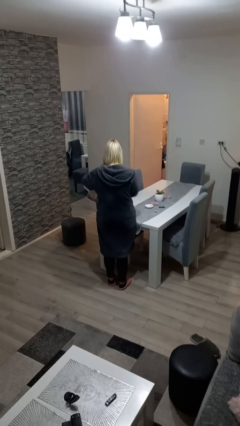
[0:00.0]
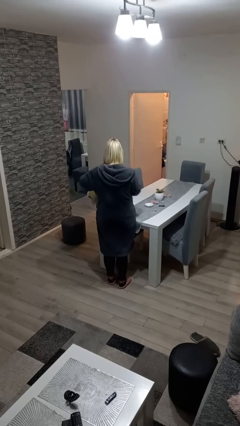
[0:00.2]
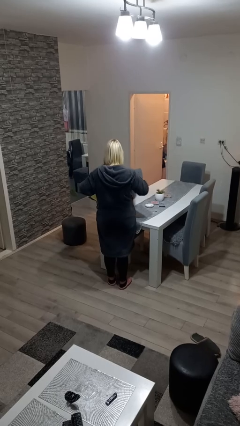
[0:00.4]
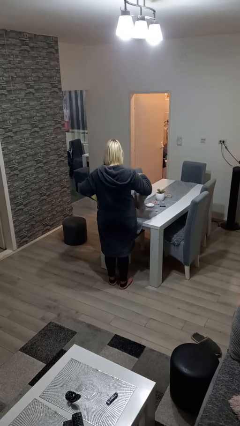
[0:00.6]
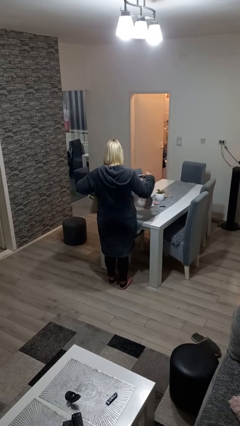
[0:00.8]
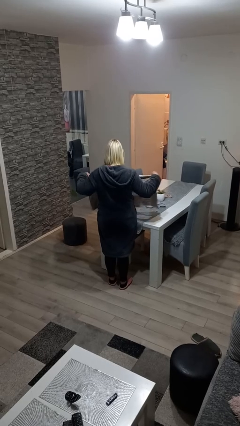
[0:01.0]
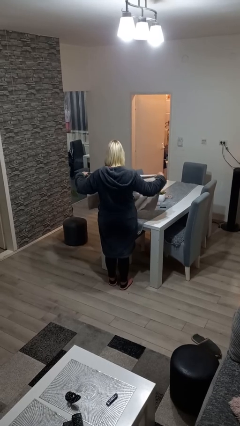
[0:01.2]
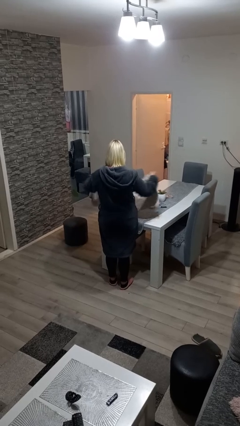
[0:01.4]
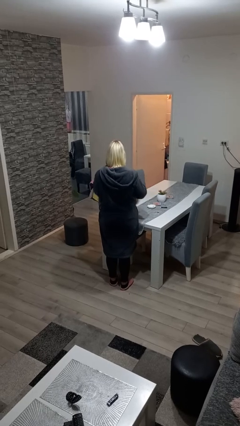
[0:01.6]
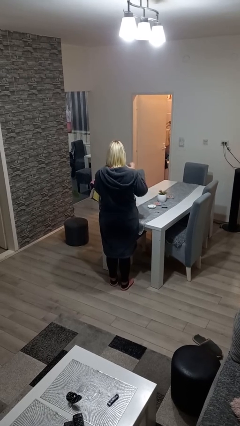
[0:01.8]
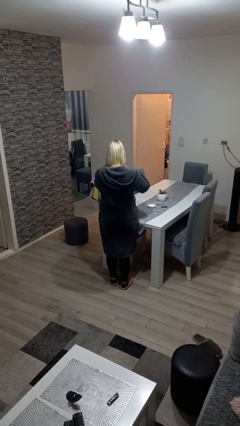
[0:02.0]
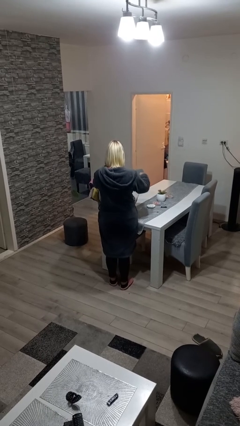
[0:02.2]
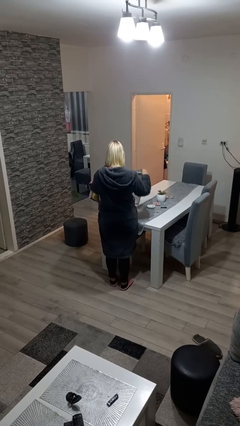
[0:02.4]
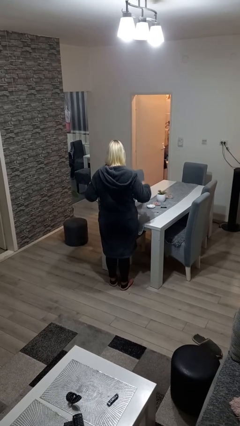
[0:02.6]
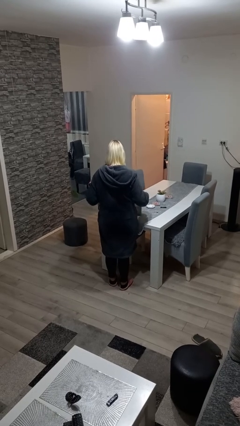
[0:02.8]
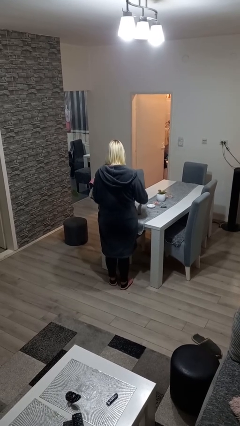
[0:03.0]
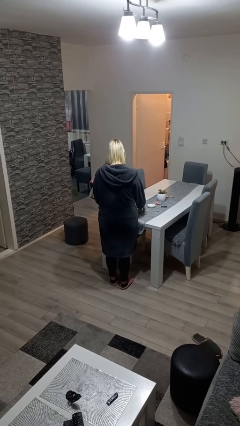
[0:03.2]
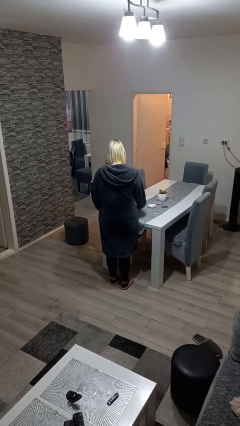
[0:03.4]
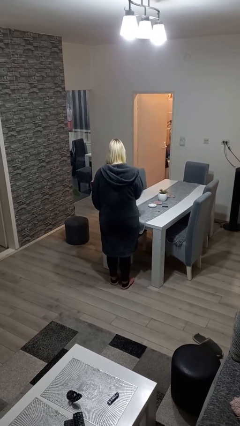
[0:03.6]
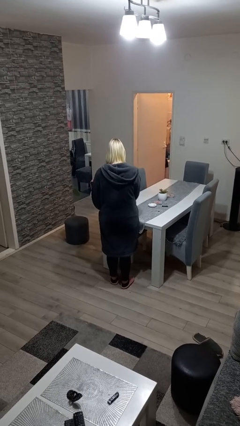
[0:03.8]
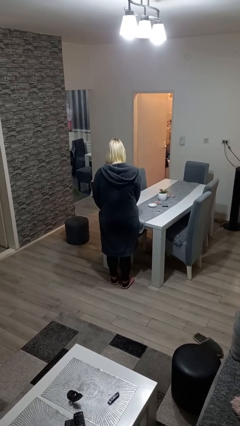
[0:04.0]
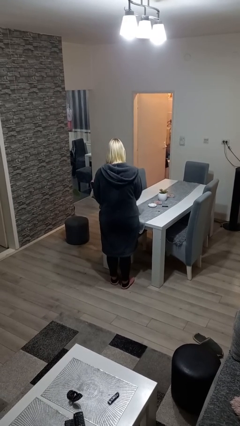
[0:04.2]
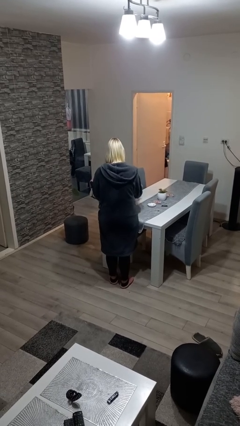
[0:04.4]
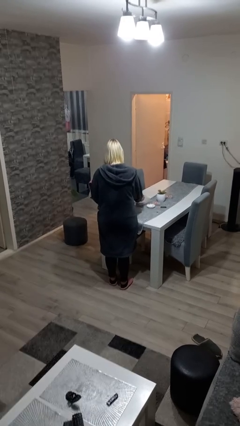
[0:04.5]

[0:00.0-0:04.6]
person folds towel

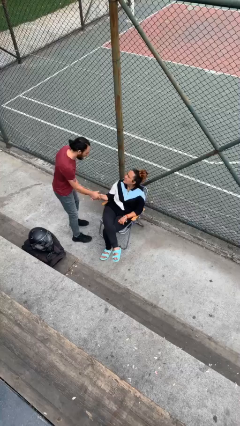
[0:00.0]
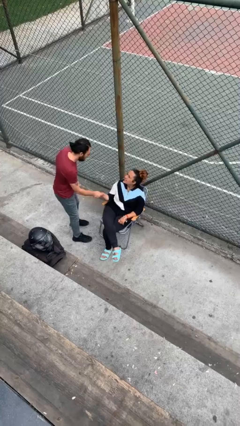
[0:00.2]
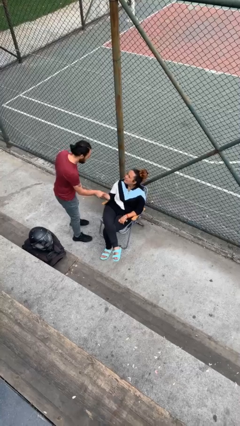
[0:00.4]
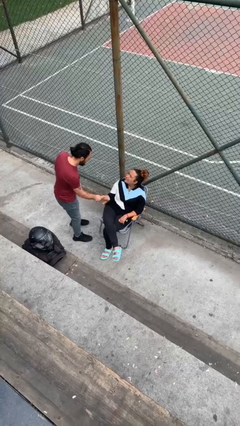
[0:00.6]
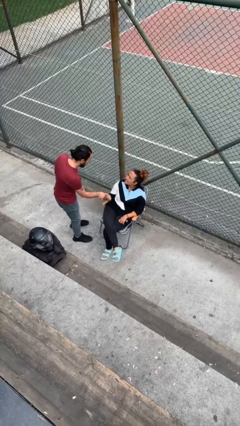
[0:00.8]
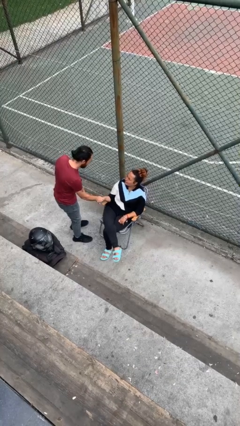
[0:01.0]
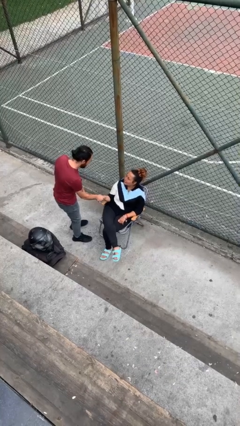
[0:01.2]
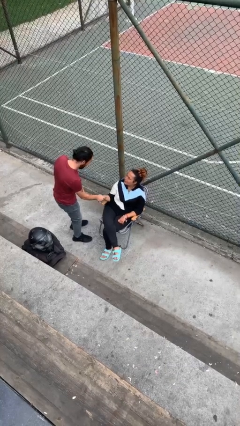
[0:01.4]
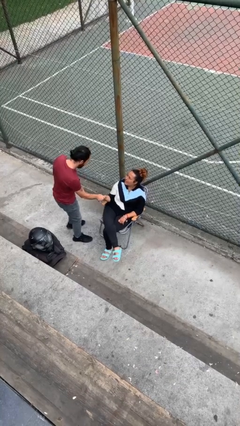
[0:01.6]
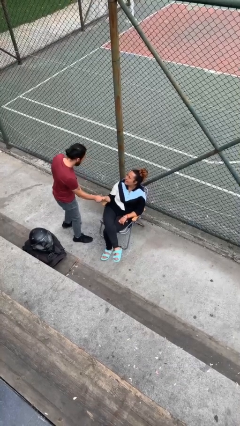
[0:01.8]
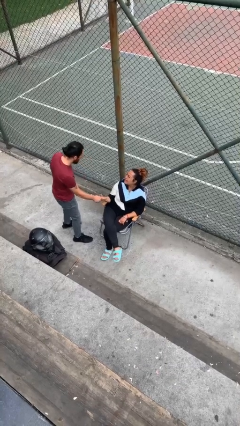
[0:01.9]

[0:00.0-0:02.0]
person shakes hand

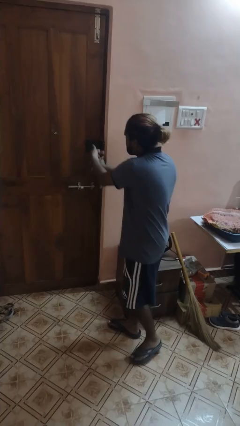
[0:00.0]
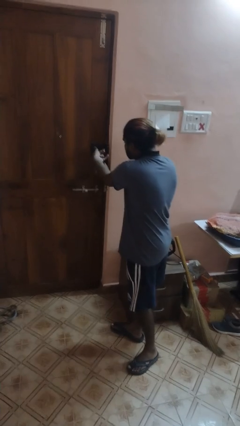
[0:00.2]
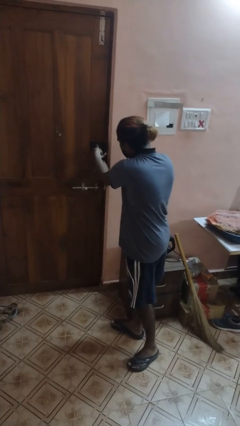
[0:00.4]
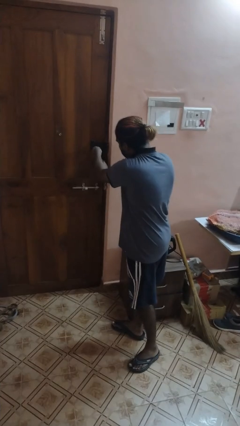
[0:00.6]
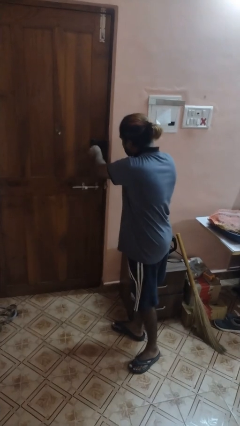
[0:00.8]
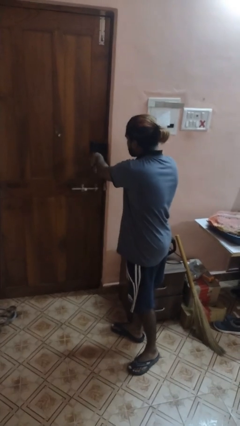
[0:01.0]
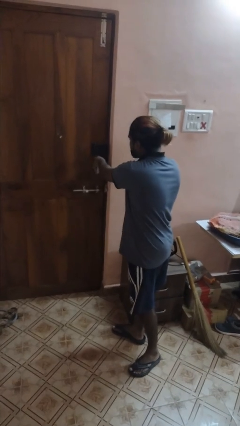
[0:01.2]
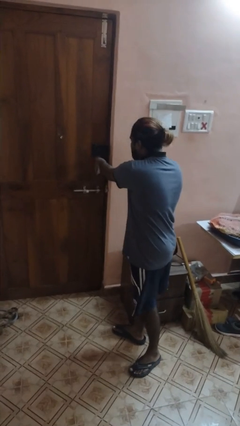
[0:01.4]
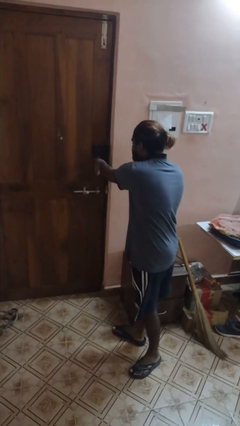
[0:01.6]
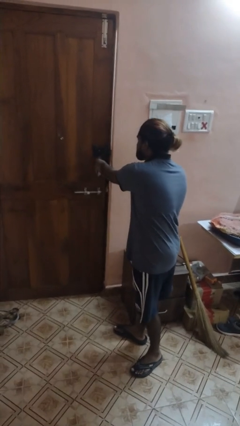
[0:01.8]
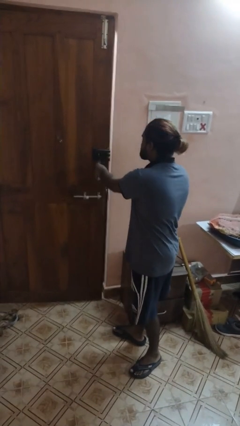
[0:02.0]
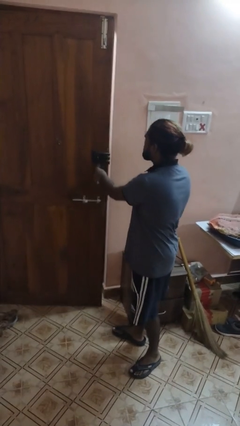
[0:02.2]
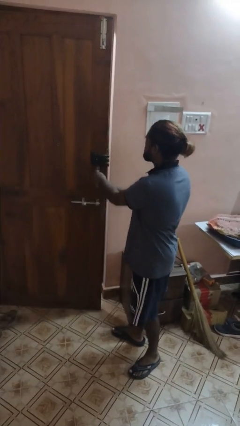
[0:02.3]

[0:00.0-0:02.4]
person unlocks door with keys

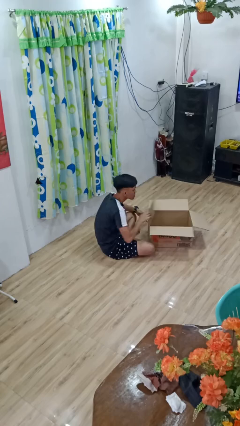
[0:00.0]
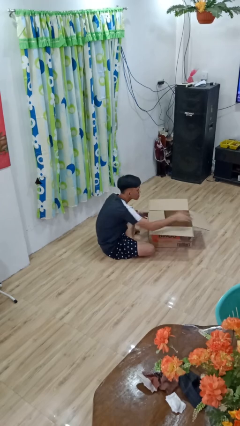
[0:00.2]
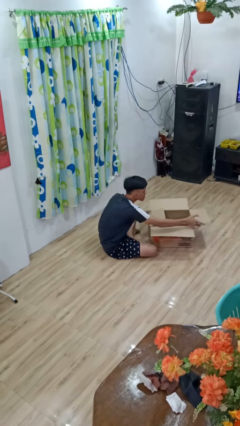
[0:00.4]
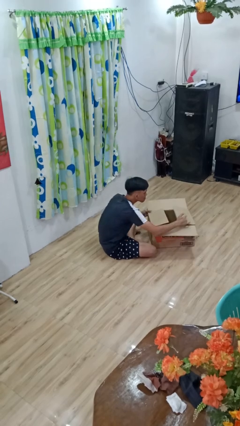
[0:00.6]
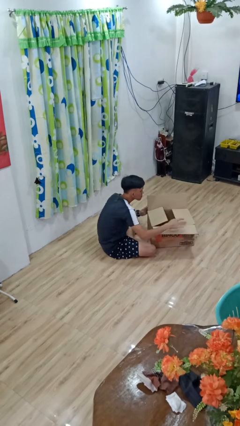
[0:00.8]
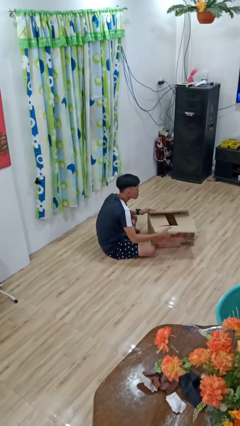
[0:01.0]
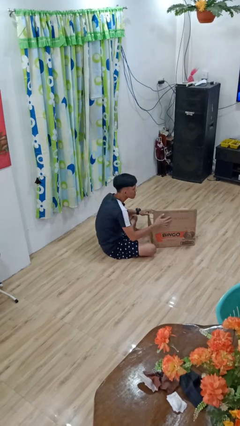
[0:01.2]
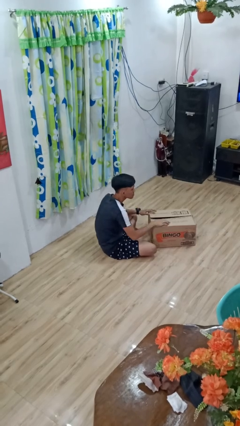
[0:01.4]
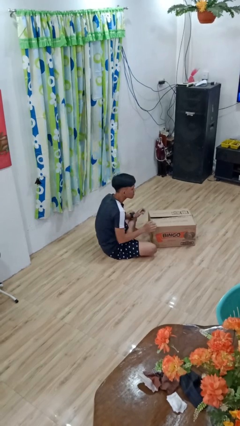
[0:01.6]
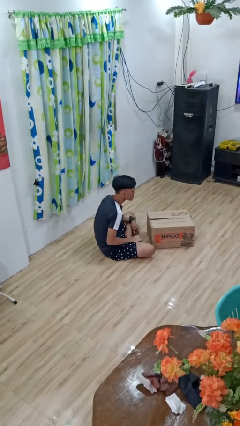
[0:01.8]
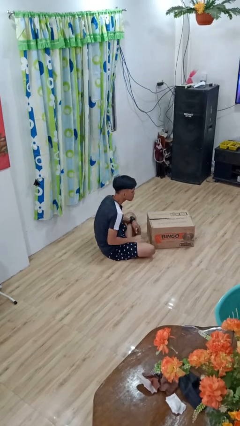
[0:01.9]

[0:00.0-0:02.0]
person closes box

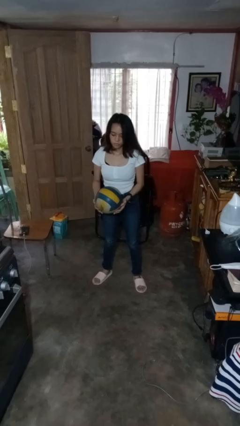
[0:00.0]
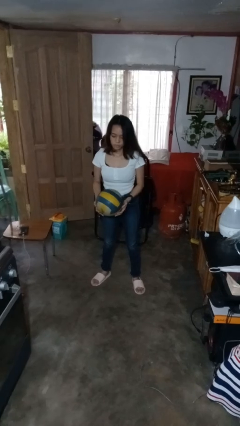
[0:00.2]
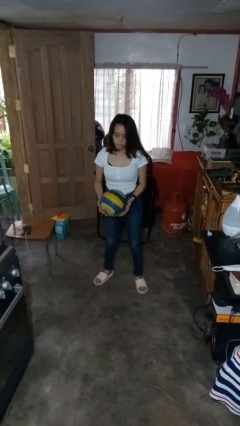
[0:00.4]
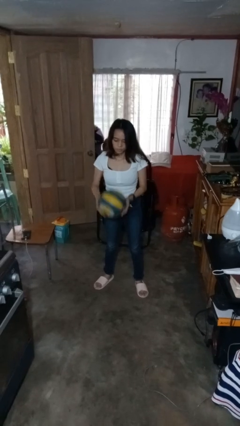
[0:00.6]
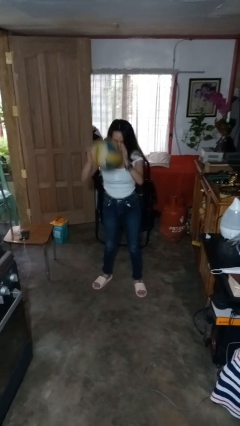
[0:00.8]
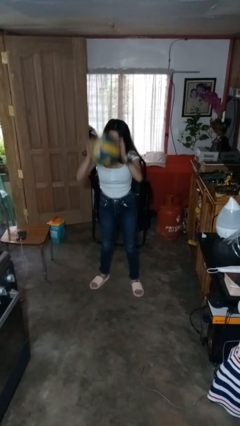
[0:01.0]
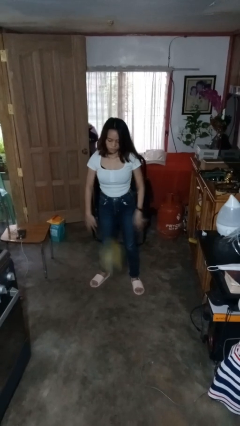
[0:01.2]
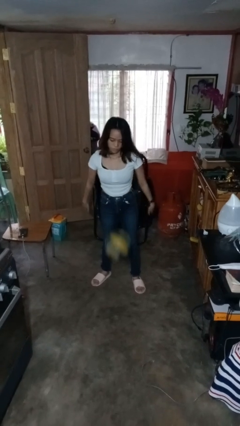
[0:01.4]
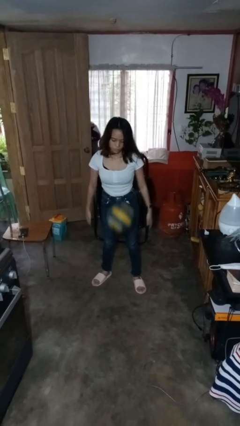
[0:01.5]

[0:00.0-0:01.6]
person bounces ball on floor

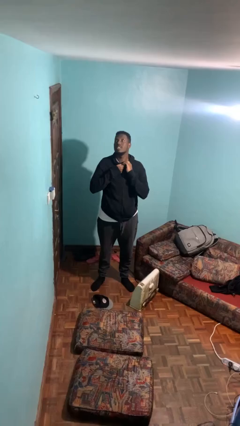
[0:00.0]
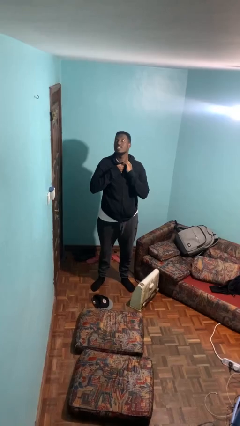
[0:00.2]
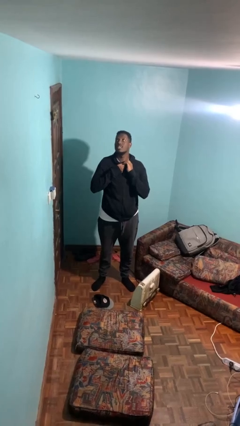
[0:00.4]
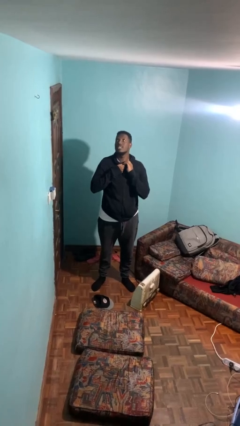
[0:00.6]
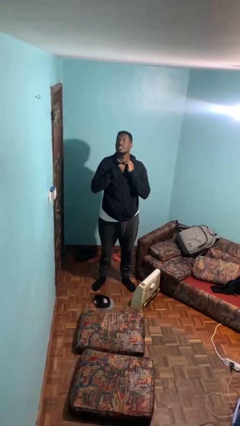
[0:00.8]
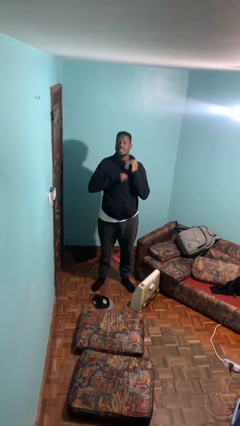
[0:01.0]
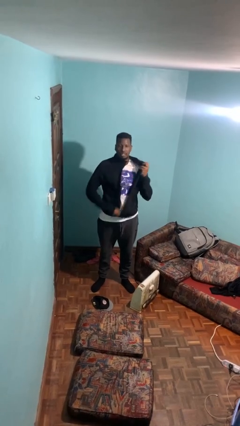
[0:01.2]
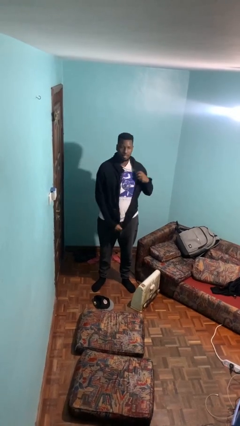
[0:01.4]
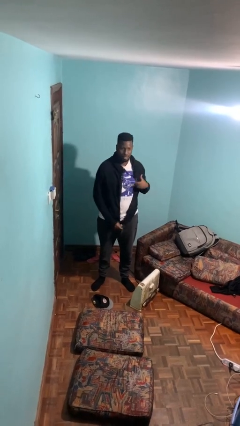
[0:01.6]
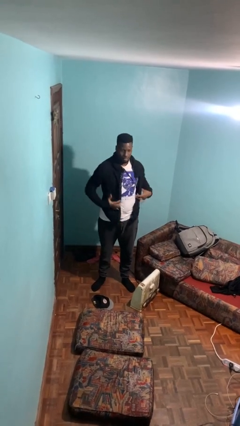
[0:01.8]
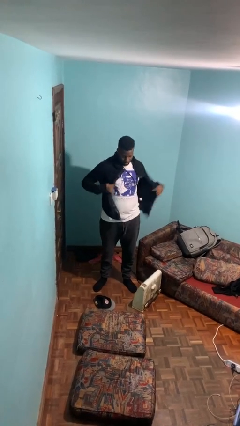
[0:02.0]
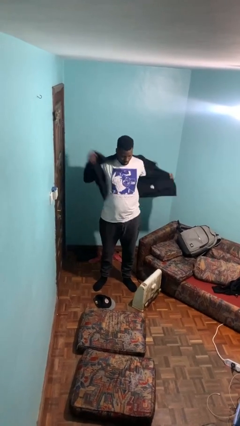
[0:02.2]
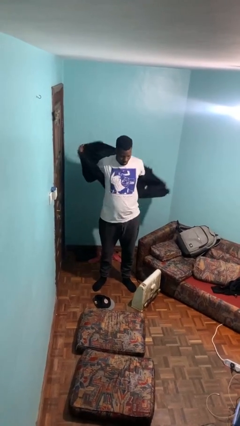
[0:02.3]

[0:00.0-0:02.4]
person unzips jacket

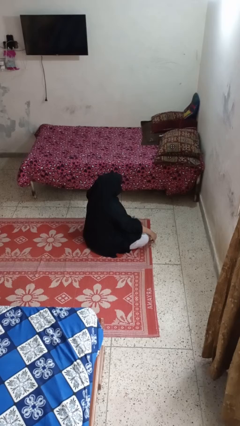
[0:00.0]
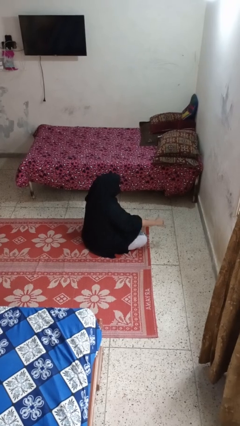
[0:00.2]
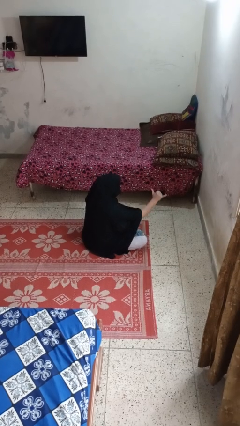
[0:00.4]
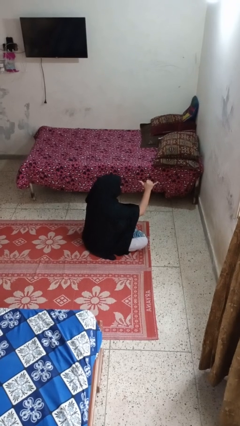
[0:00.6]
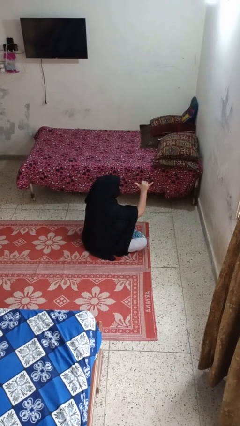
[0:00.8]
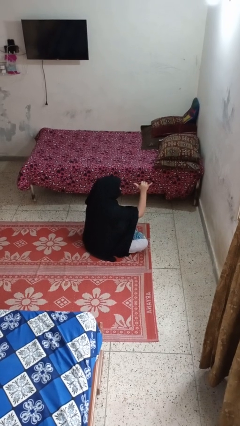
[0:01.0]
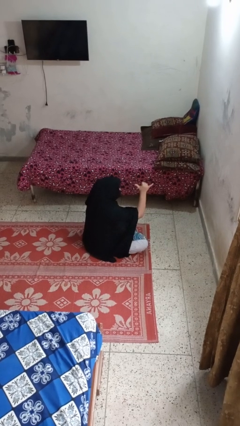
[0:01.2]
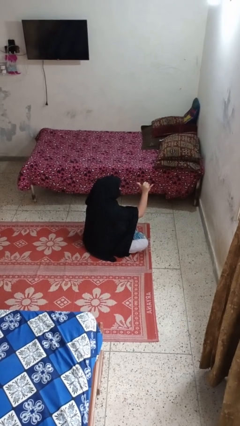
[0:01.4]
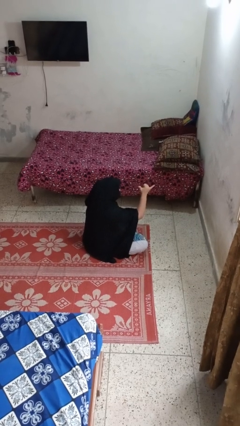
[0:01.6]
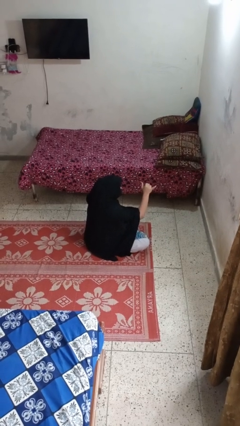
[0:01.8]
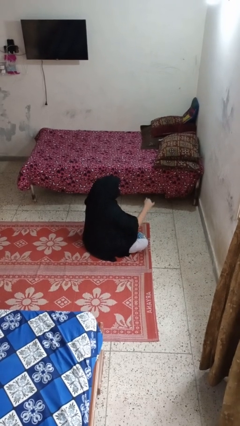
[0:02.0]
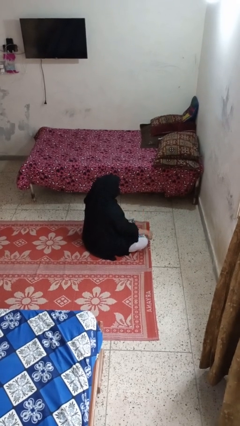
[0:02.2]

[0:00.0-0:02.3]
person gestures hang loose
